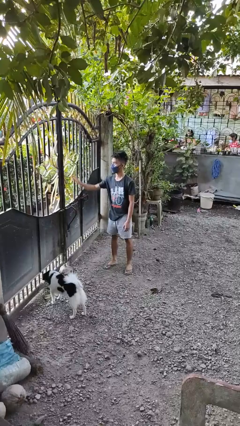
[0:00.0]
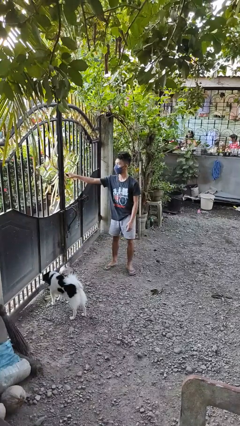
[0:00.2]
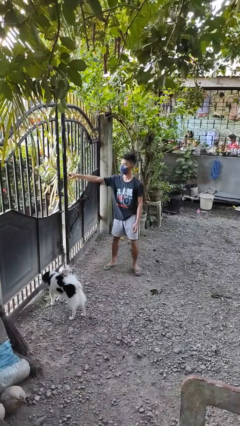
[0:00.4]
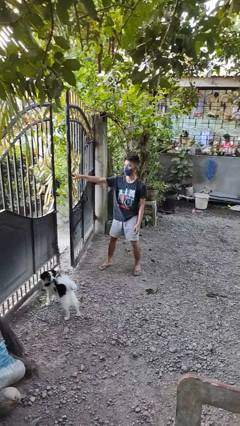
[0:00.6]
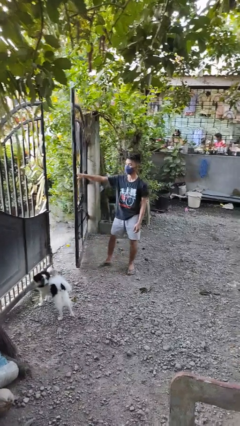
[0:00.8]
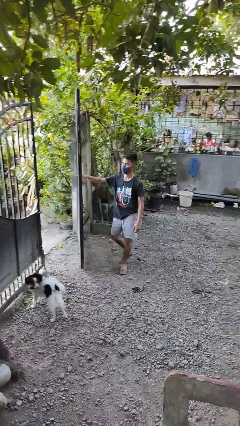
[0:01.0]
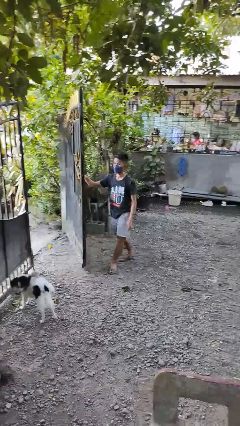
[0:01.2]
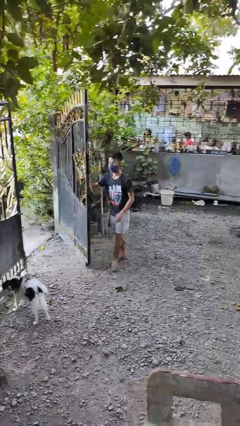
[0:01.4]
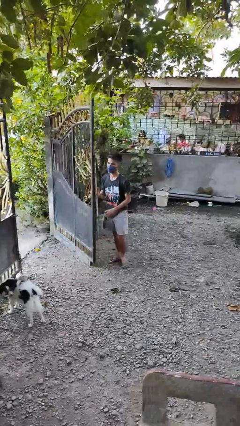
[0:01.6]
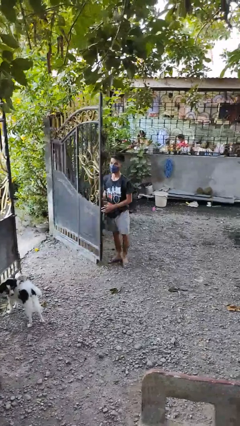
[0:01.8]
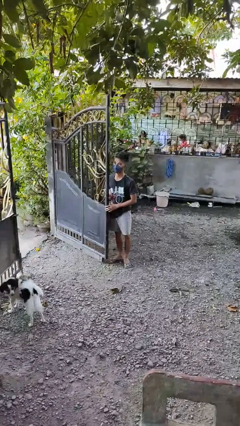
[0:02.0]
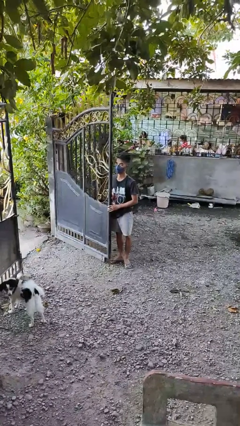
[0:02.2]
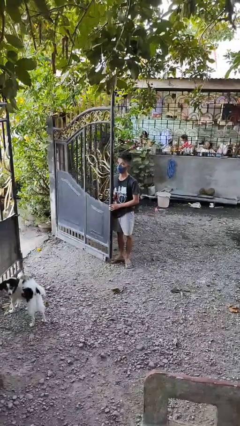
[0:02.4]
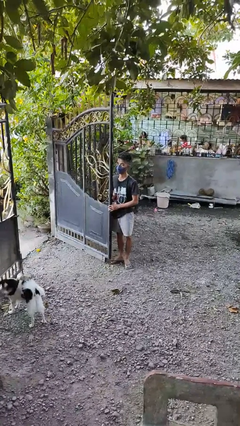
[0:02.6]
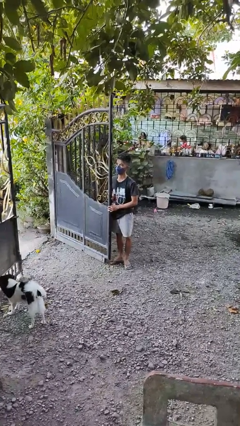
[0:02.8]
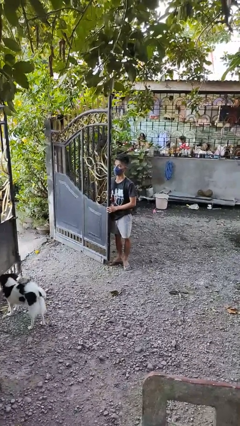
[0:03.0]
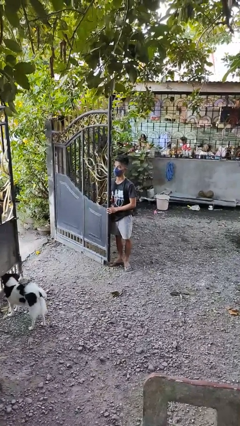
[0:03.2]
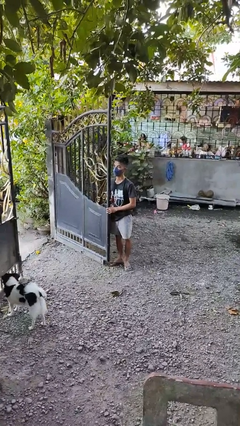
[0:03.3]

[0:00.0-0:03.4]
person opens gate

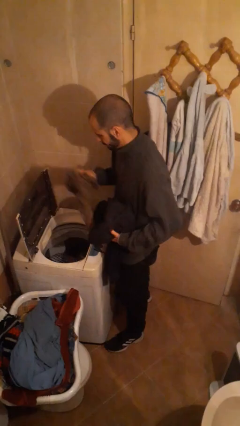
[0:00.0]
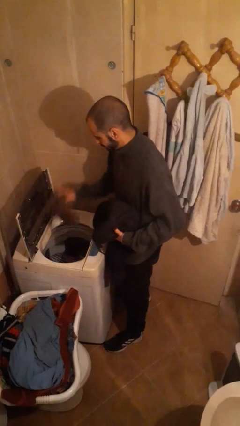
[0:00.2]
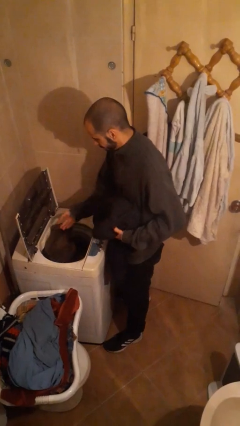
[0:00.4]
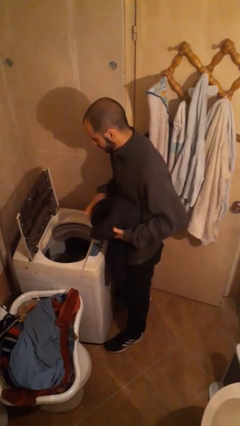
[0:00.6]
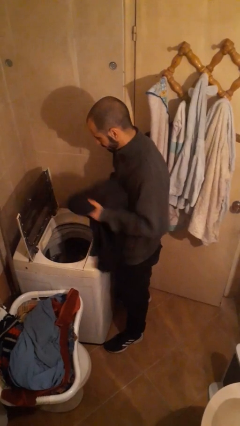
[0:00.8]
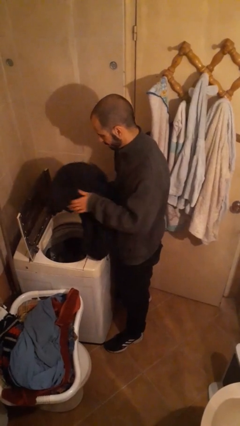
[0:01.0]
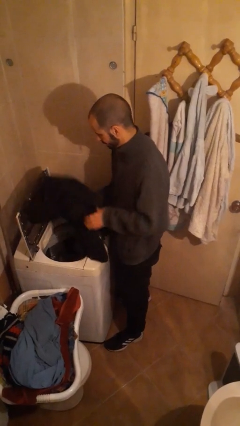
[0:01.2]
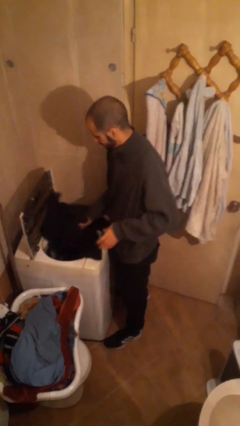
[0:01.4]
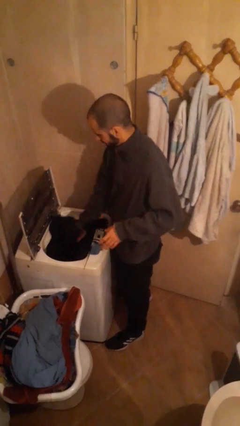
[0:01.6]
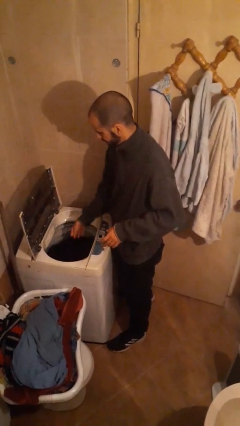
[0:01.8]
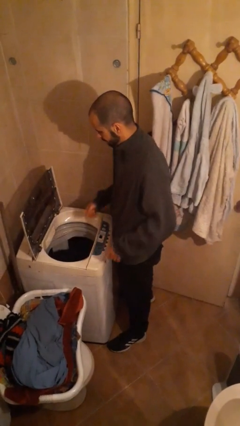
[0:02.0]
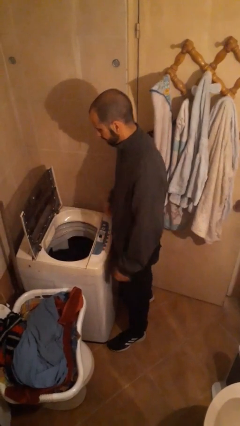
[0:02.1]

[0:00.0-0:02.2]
person loads clotheswasher

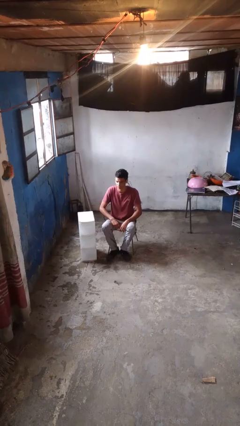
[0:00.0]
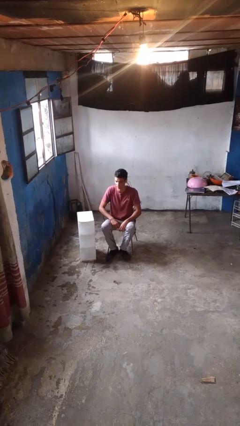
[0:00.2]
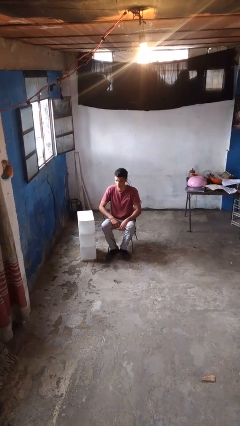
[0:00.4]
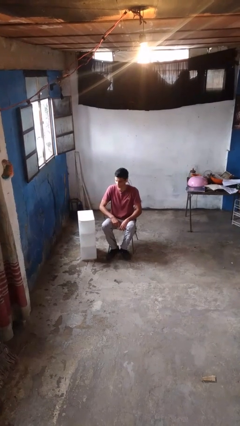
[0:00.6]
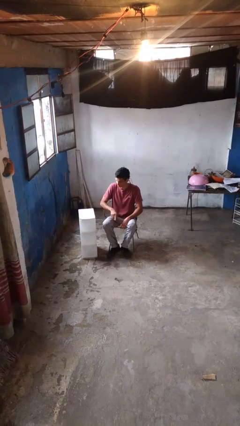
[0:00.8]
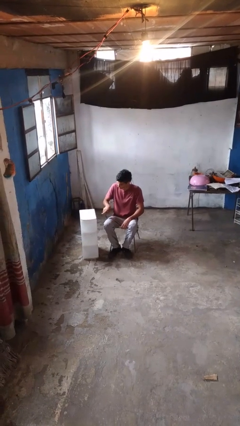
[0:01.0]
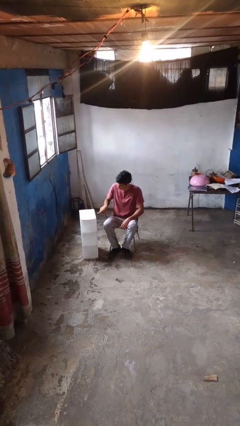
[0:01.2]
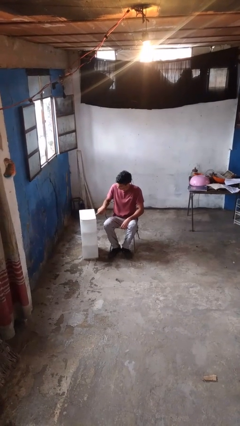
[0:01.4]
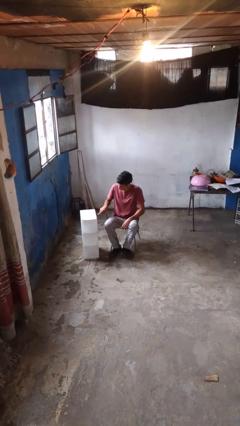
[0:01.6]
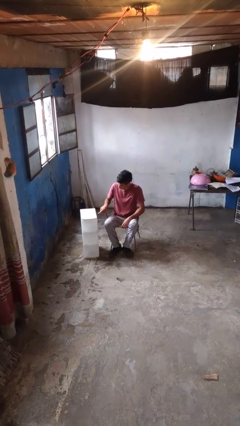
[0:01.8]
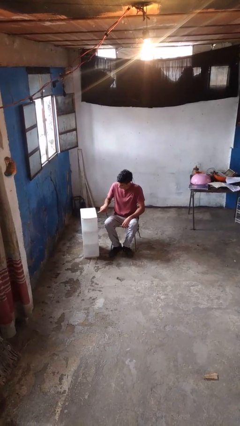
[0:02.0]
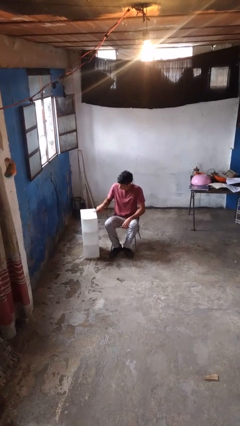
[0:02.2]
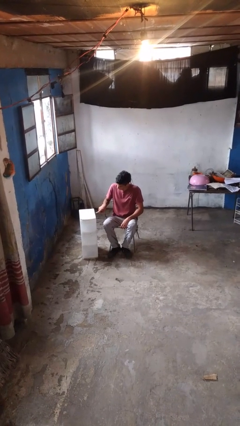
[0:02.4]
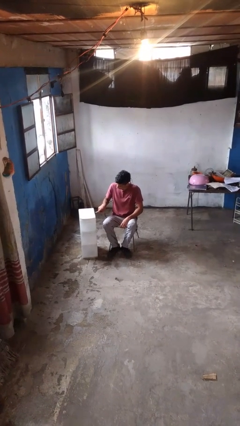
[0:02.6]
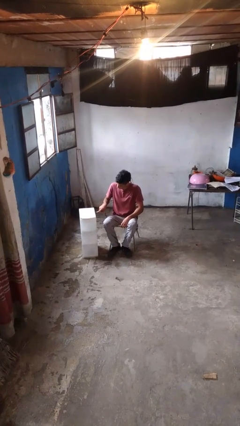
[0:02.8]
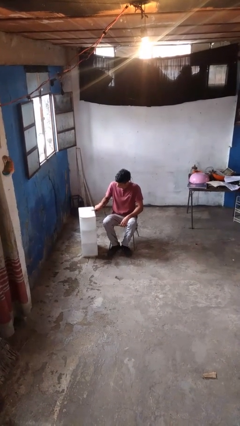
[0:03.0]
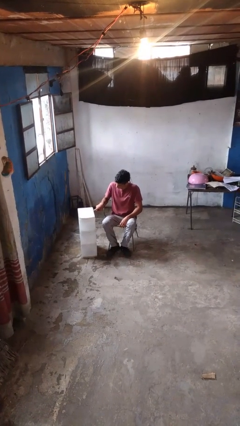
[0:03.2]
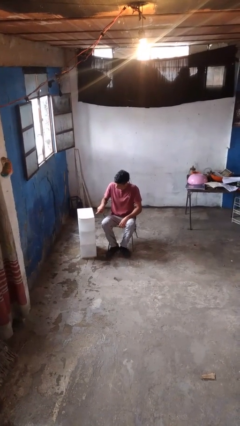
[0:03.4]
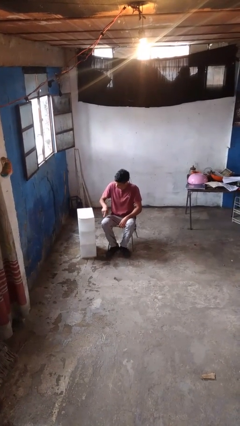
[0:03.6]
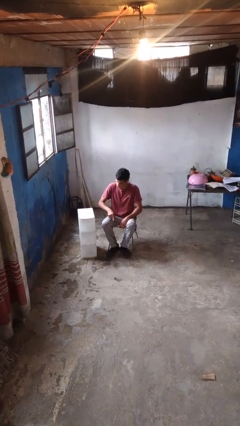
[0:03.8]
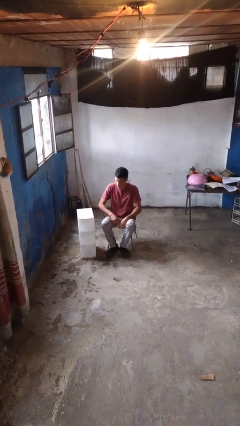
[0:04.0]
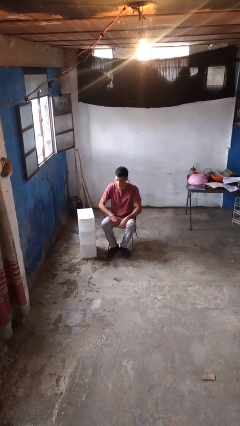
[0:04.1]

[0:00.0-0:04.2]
person taps object with finger

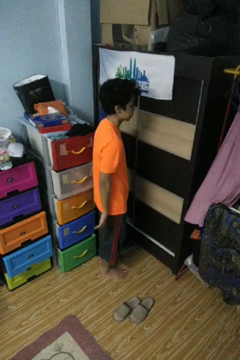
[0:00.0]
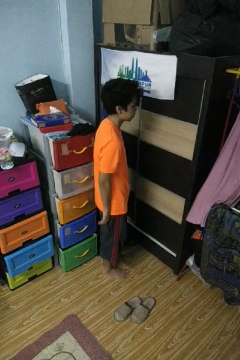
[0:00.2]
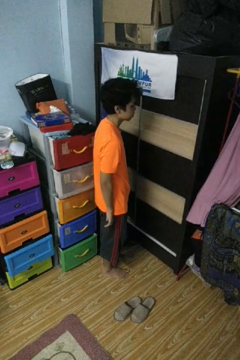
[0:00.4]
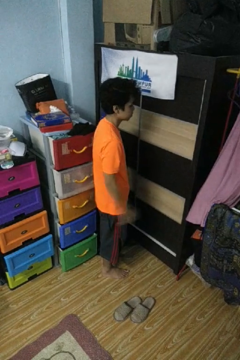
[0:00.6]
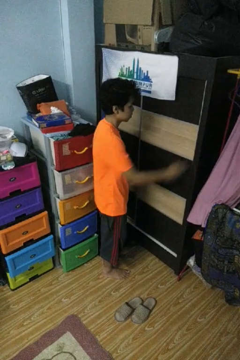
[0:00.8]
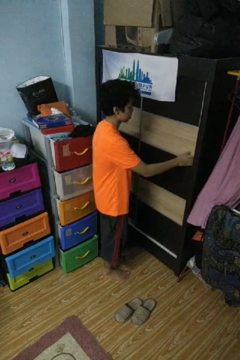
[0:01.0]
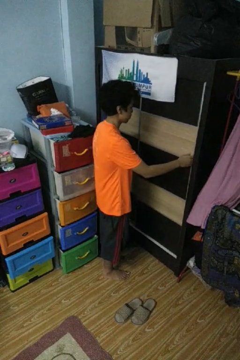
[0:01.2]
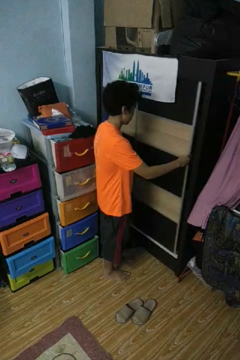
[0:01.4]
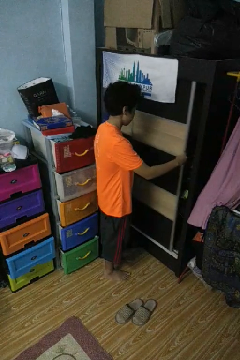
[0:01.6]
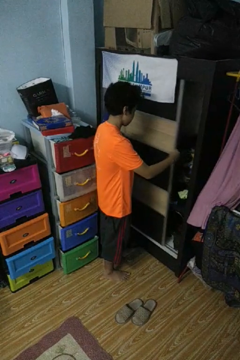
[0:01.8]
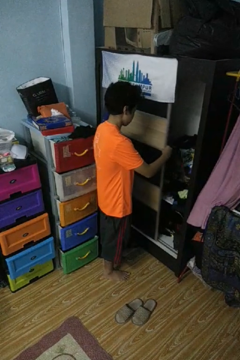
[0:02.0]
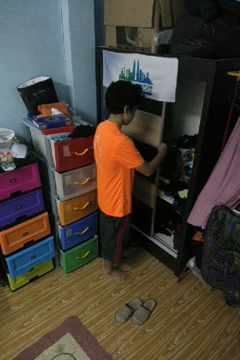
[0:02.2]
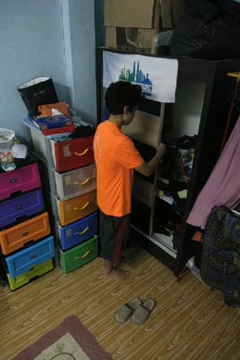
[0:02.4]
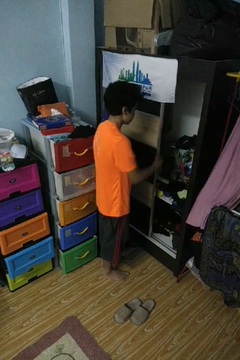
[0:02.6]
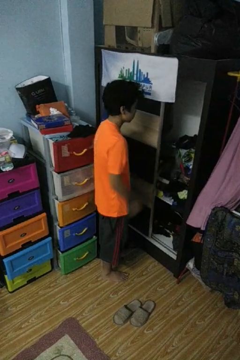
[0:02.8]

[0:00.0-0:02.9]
person opens closet door

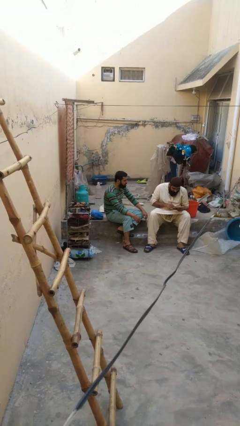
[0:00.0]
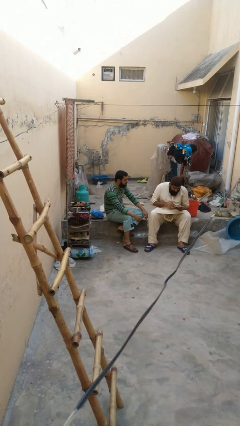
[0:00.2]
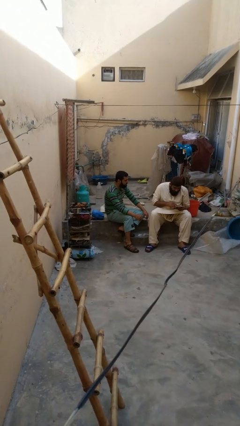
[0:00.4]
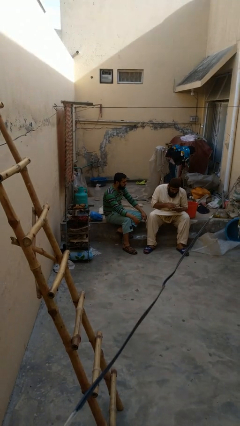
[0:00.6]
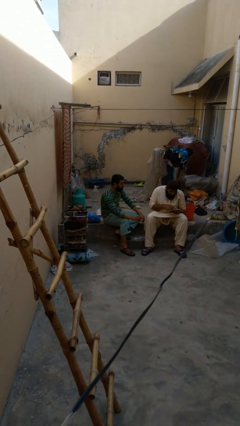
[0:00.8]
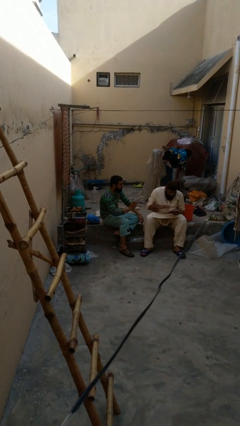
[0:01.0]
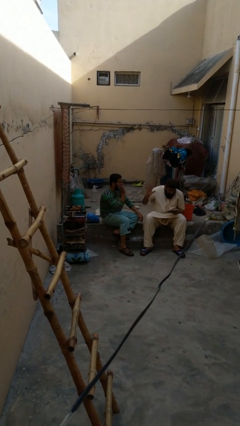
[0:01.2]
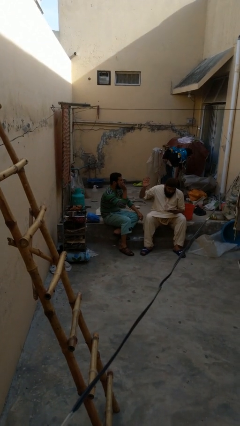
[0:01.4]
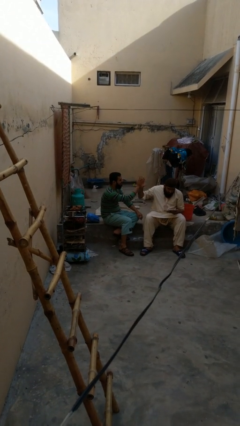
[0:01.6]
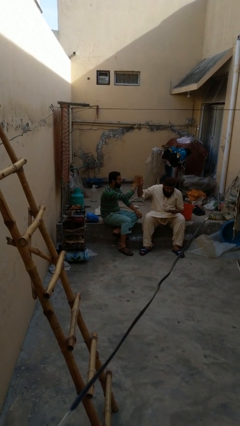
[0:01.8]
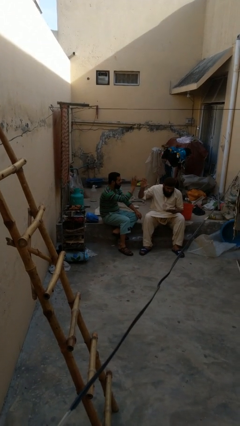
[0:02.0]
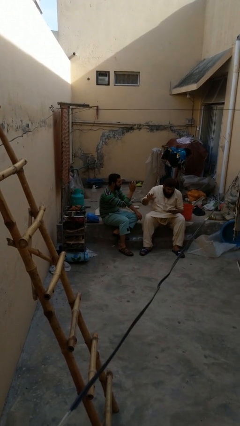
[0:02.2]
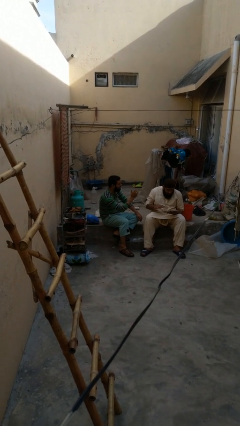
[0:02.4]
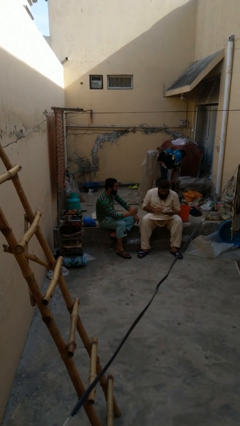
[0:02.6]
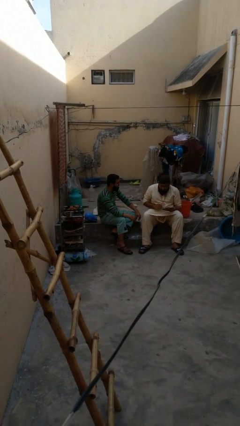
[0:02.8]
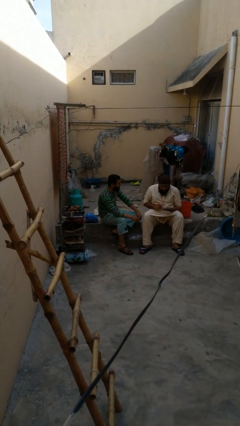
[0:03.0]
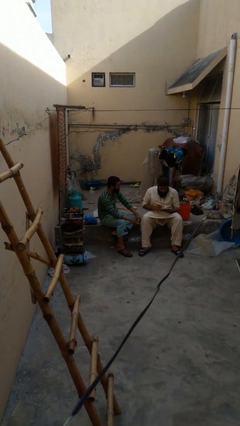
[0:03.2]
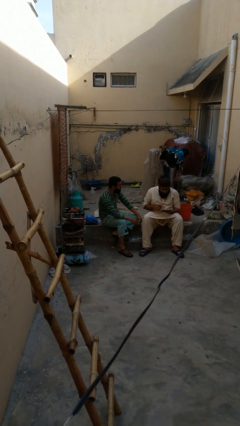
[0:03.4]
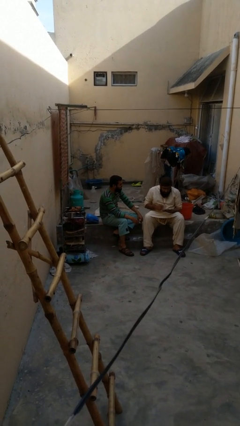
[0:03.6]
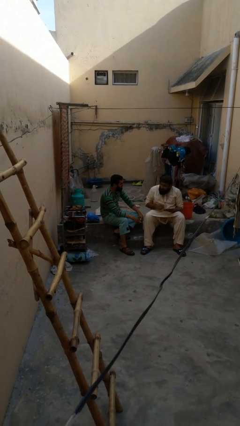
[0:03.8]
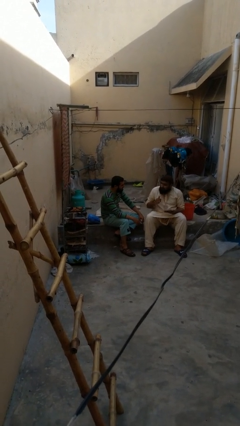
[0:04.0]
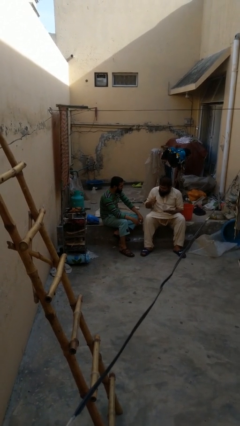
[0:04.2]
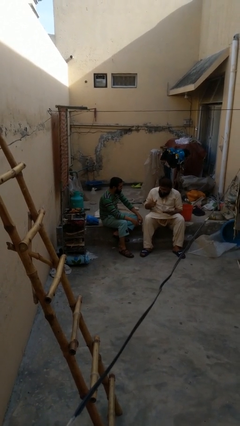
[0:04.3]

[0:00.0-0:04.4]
person highfives hand

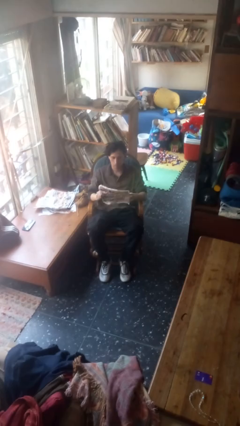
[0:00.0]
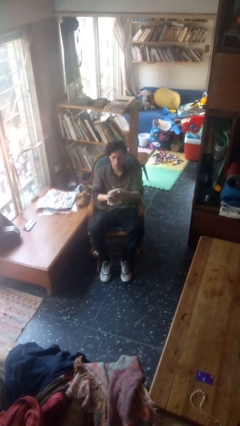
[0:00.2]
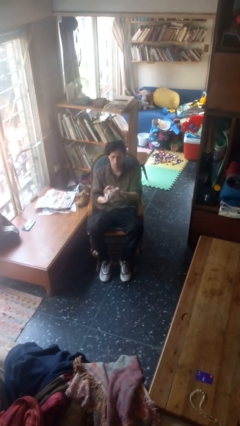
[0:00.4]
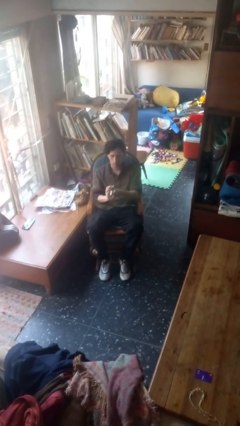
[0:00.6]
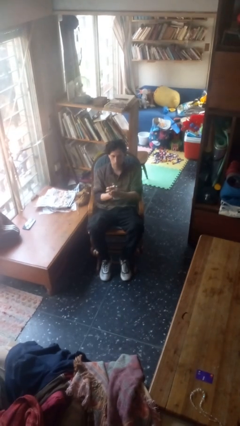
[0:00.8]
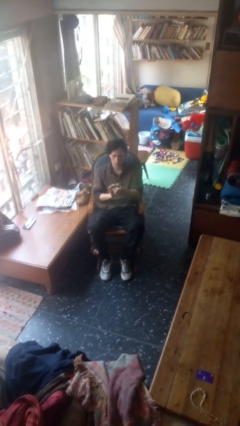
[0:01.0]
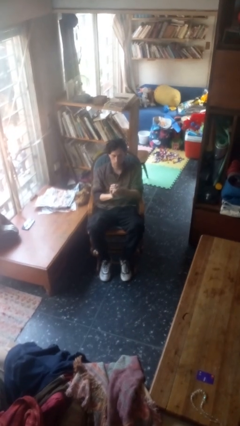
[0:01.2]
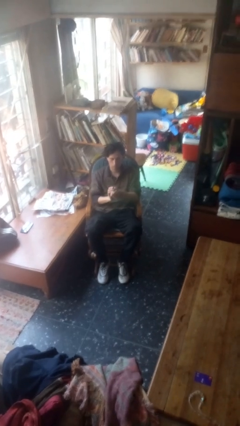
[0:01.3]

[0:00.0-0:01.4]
person crumples paper
